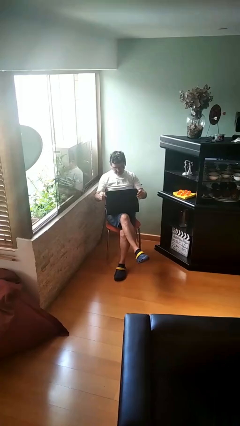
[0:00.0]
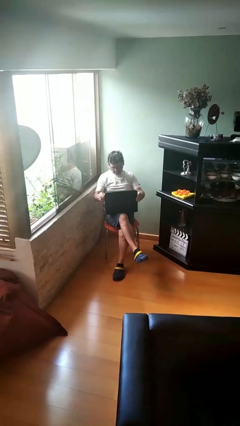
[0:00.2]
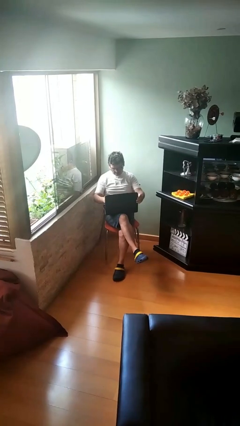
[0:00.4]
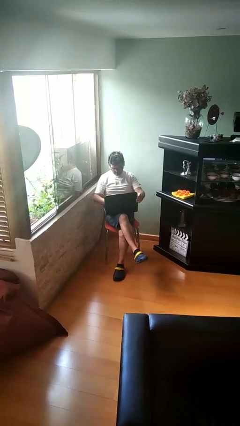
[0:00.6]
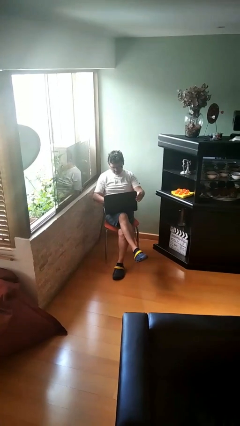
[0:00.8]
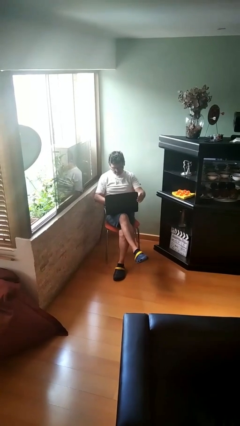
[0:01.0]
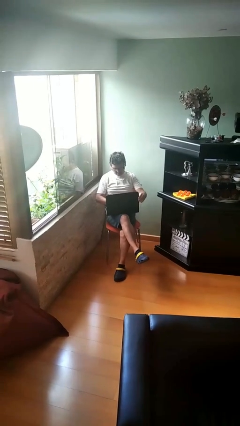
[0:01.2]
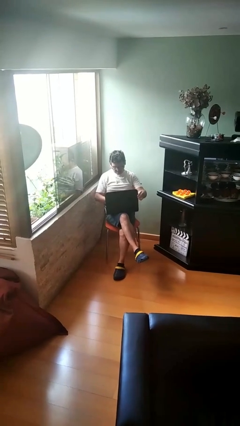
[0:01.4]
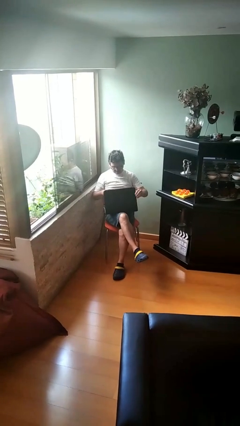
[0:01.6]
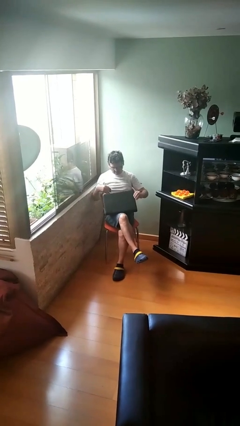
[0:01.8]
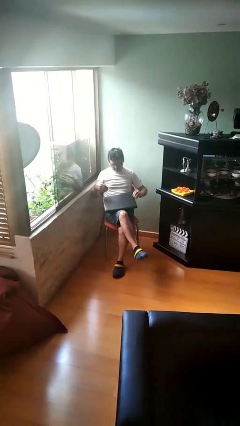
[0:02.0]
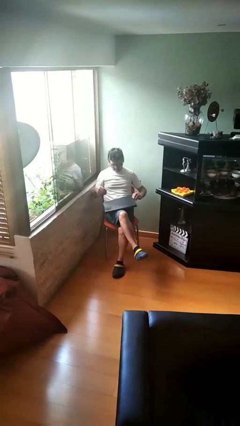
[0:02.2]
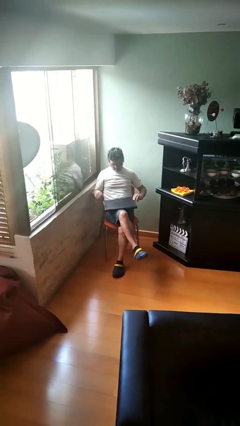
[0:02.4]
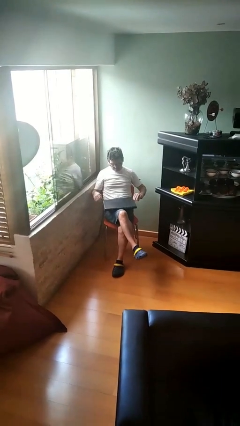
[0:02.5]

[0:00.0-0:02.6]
person interacts with laptop

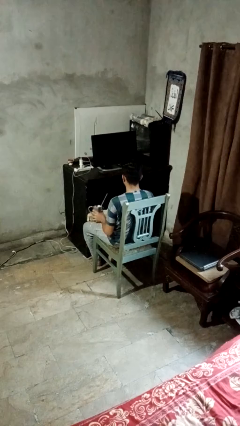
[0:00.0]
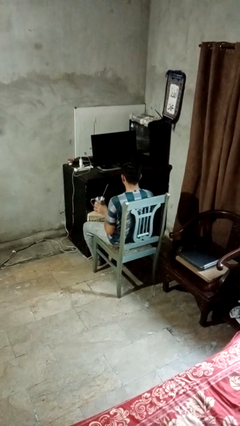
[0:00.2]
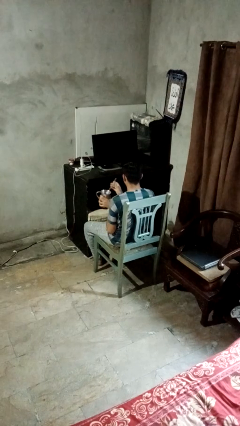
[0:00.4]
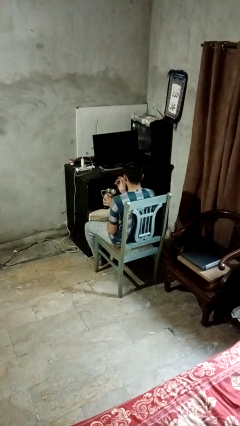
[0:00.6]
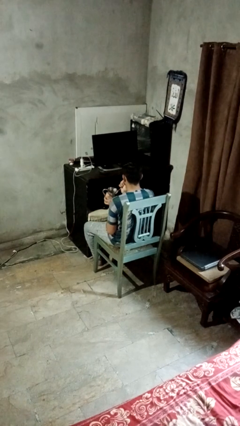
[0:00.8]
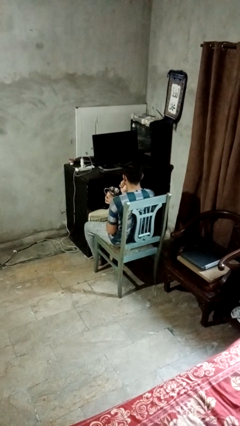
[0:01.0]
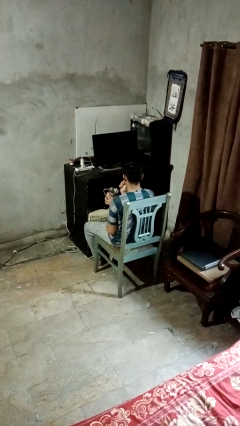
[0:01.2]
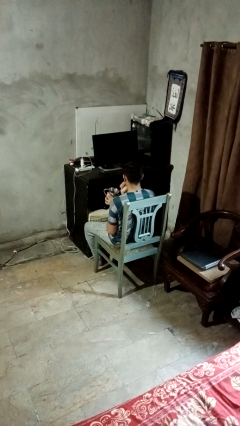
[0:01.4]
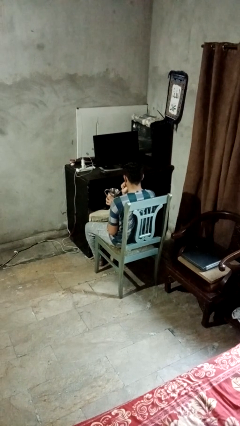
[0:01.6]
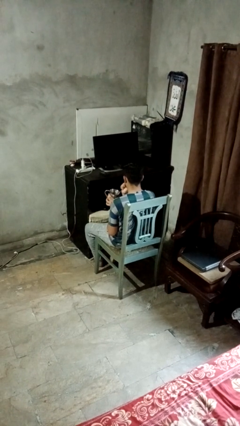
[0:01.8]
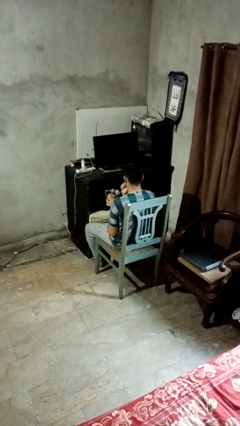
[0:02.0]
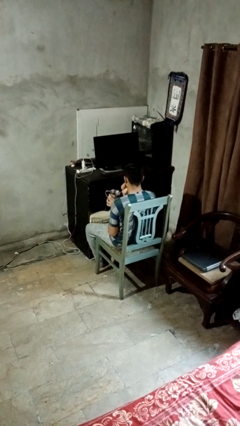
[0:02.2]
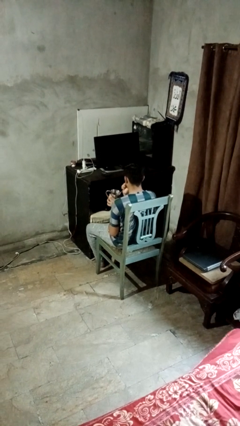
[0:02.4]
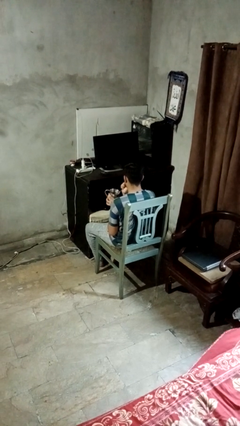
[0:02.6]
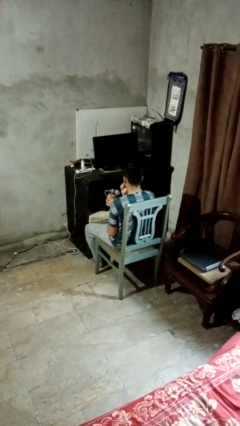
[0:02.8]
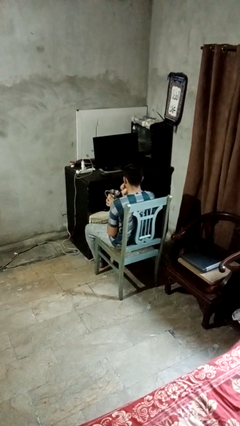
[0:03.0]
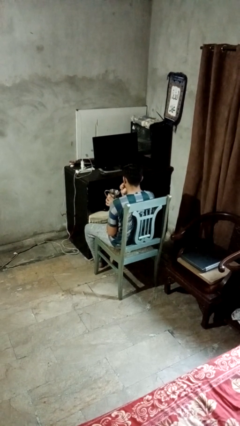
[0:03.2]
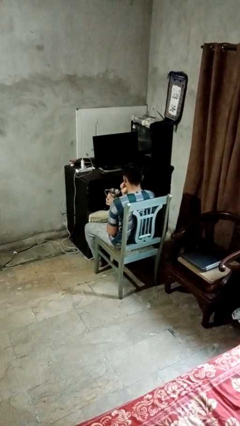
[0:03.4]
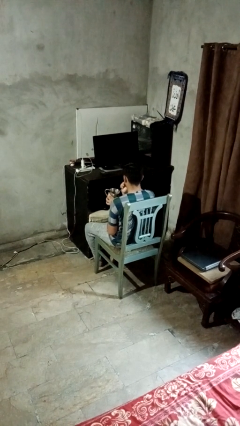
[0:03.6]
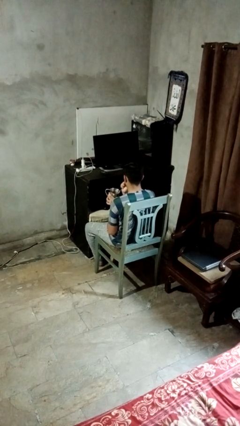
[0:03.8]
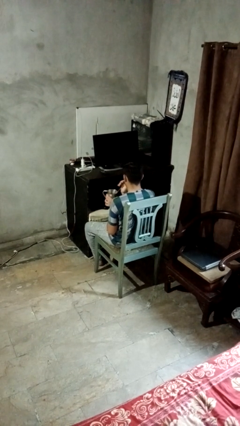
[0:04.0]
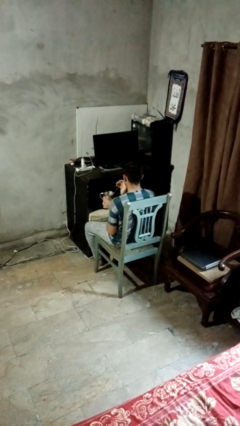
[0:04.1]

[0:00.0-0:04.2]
person drinks from straw

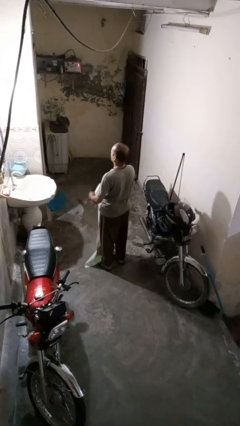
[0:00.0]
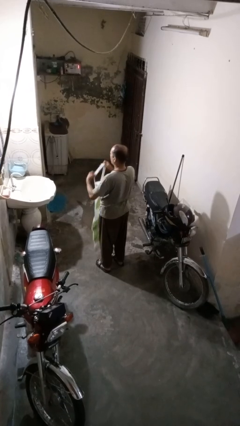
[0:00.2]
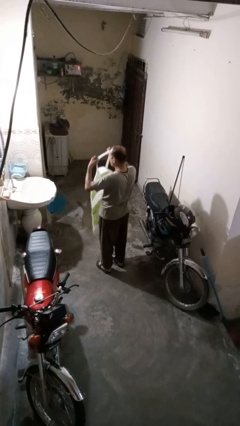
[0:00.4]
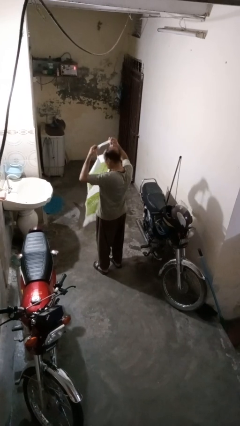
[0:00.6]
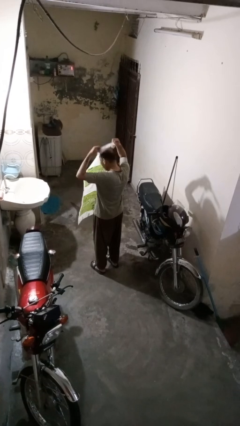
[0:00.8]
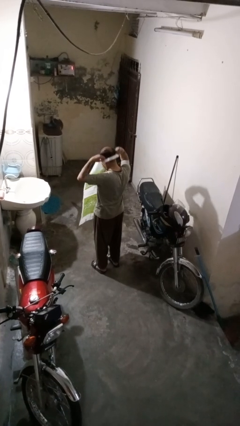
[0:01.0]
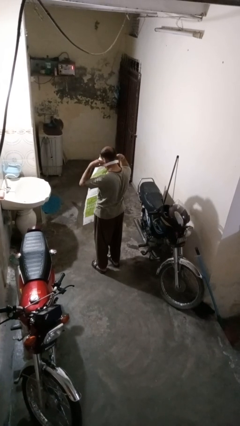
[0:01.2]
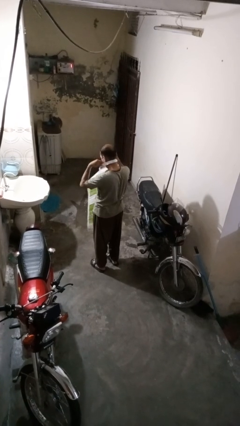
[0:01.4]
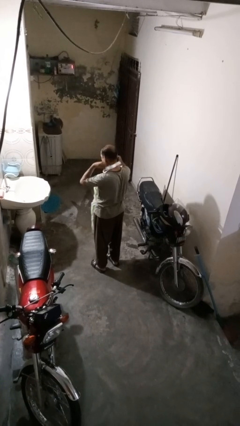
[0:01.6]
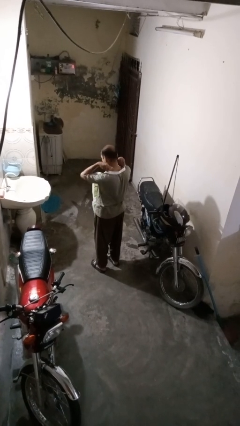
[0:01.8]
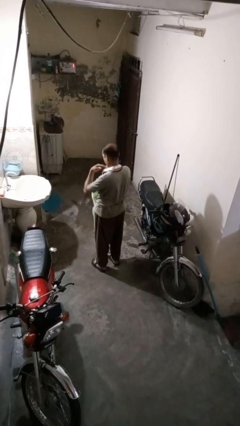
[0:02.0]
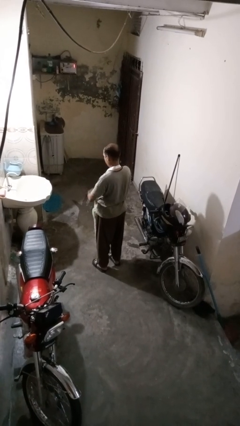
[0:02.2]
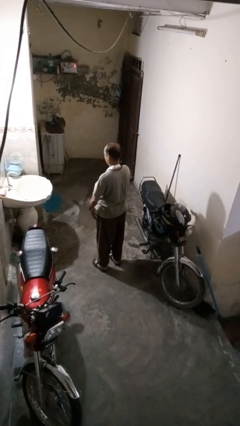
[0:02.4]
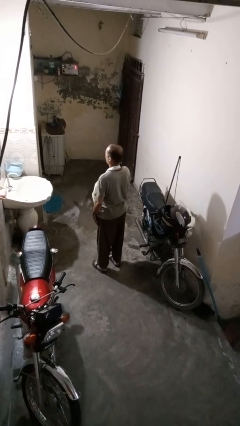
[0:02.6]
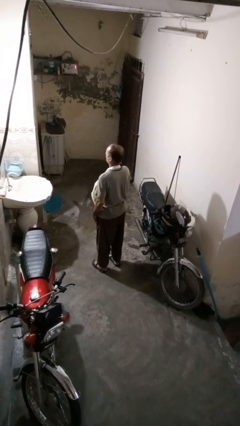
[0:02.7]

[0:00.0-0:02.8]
person puts on apron

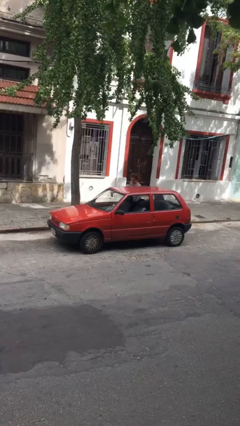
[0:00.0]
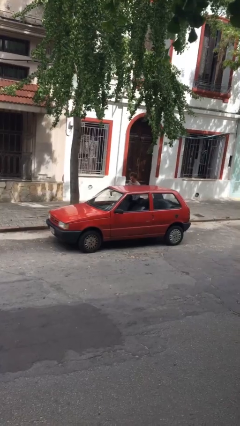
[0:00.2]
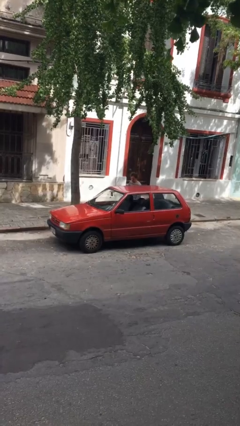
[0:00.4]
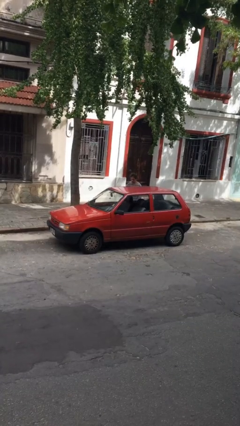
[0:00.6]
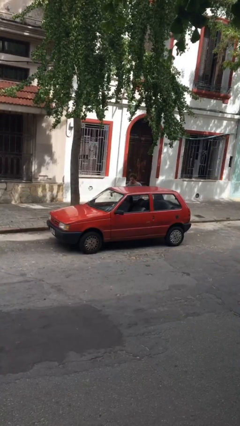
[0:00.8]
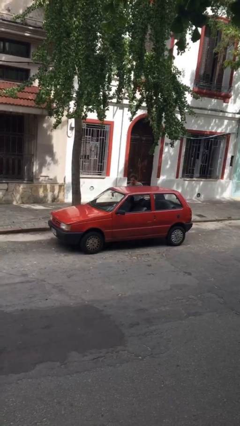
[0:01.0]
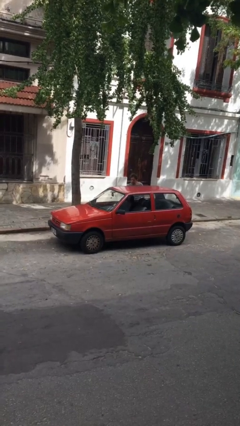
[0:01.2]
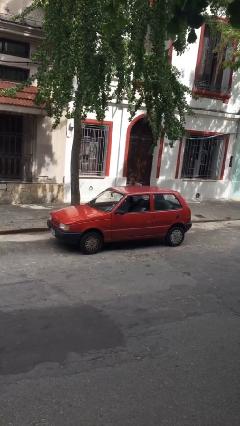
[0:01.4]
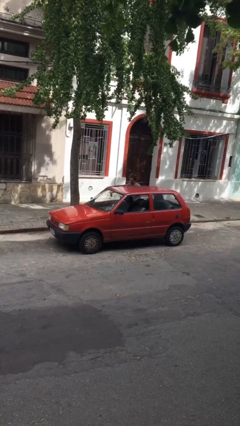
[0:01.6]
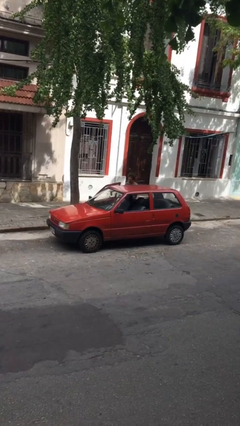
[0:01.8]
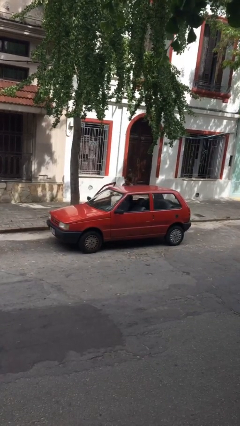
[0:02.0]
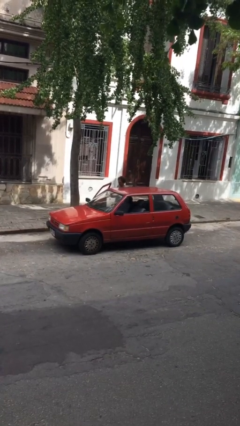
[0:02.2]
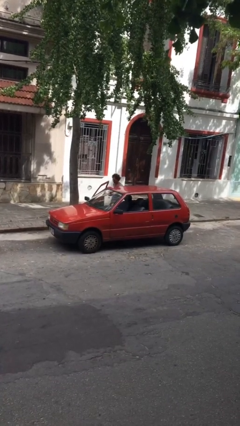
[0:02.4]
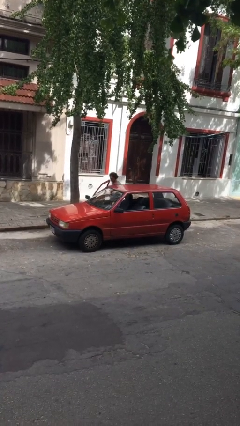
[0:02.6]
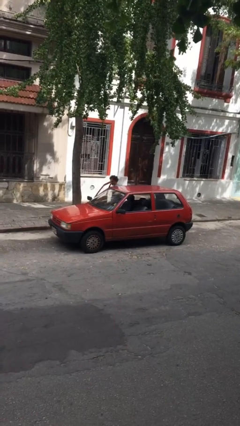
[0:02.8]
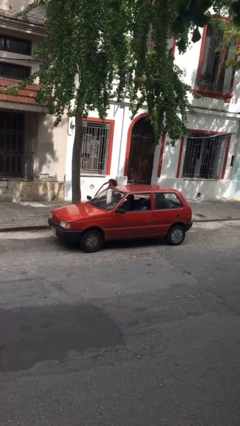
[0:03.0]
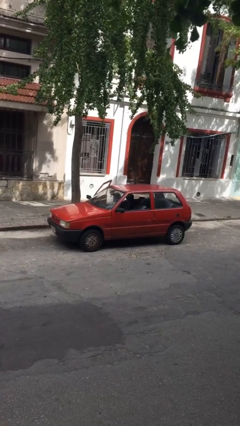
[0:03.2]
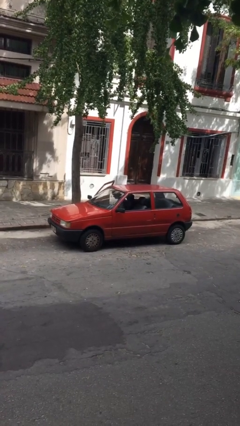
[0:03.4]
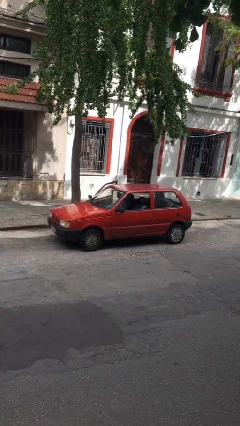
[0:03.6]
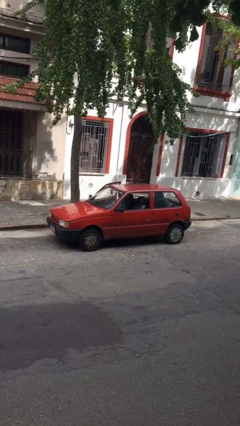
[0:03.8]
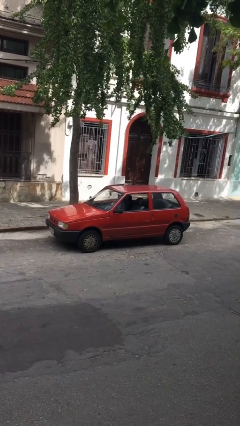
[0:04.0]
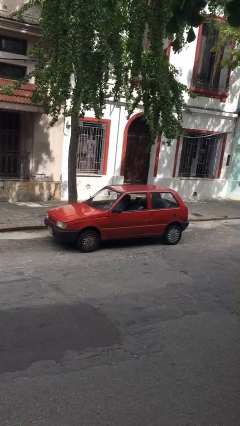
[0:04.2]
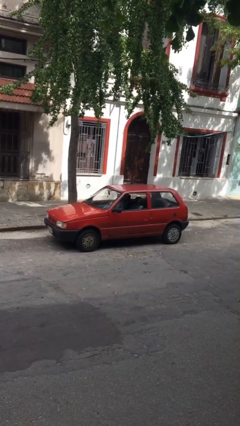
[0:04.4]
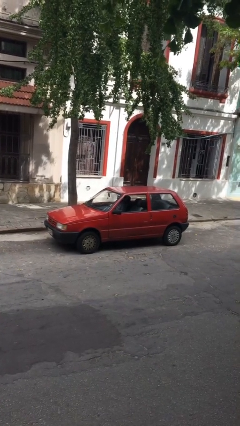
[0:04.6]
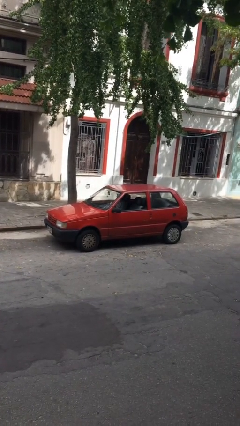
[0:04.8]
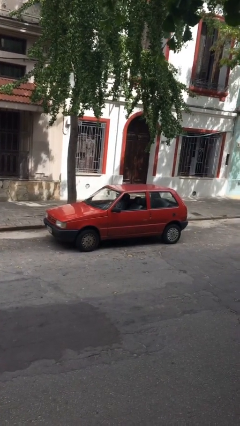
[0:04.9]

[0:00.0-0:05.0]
car picks up person

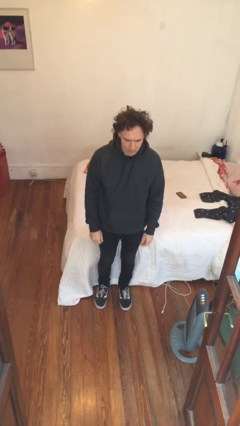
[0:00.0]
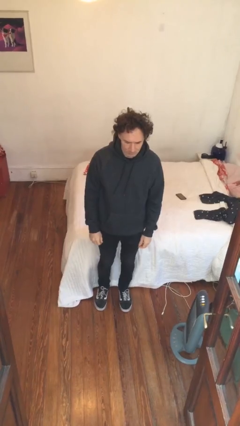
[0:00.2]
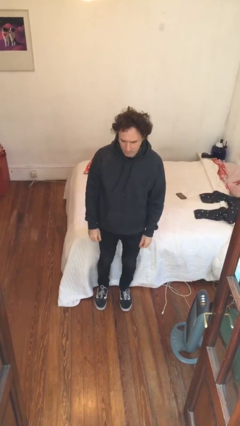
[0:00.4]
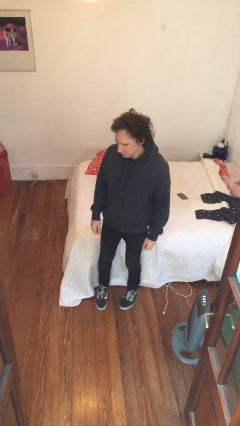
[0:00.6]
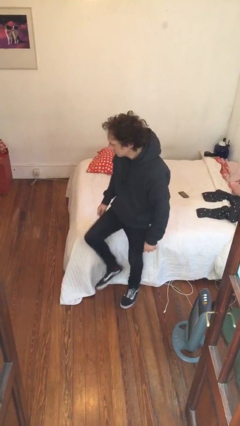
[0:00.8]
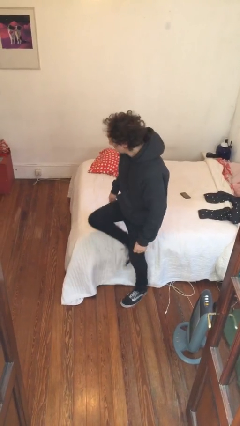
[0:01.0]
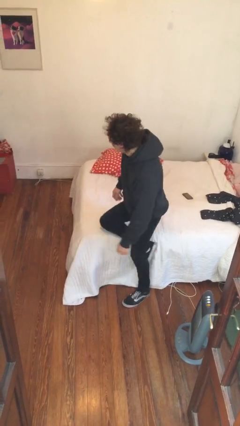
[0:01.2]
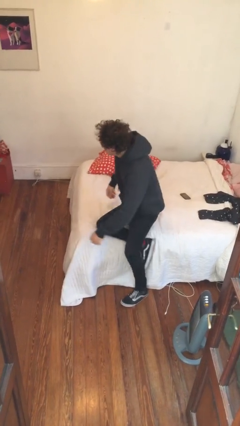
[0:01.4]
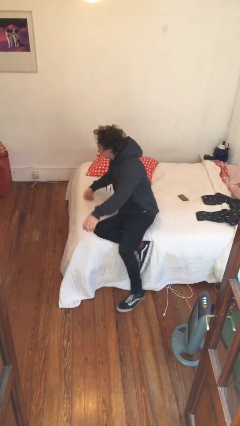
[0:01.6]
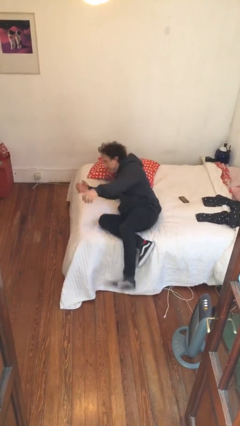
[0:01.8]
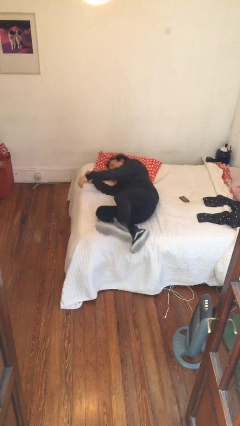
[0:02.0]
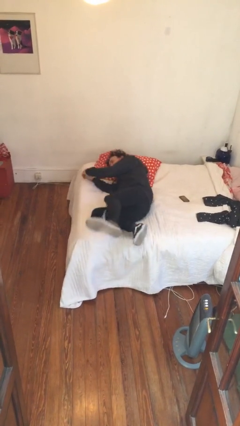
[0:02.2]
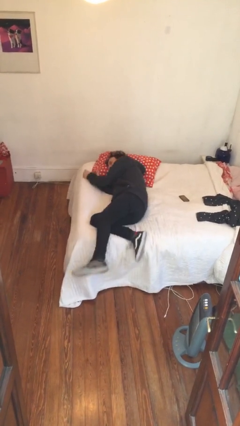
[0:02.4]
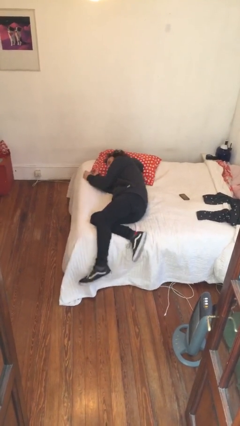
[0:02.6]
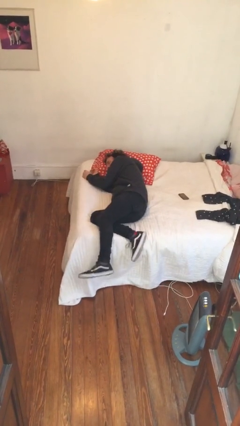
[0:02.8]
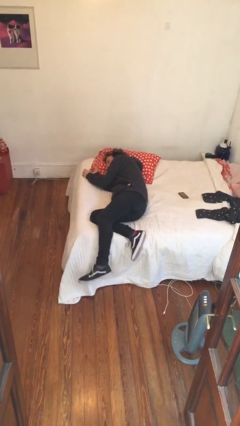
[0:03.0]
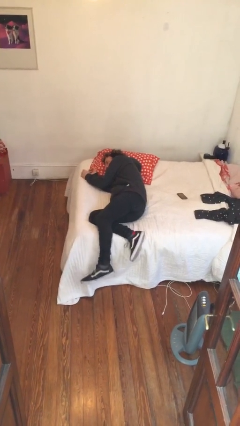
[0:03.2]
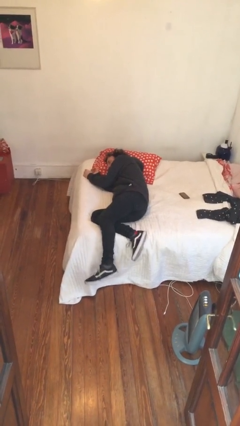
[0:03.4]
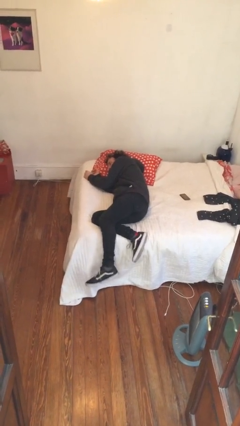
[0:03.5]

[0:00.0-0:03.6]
person lies down on bed
